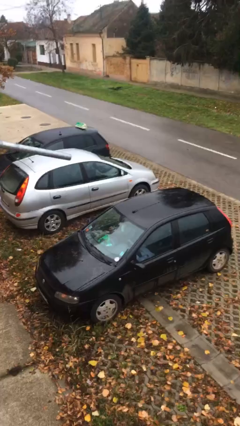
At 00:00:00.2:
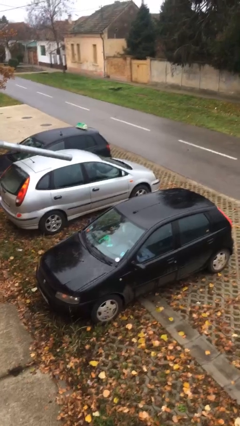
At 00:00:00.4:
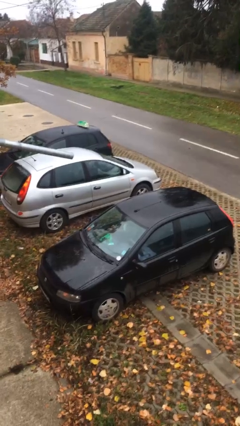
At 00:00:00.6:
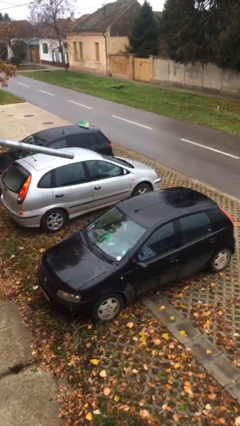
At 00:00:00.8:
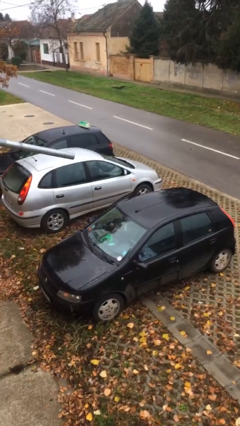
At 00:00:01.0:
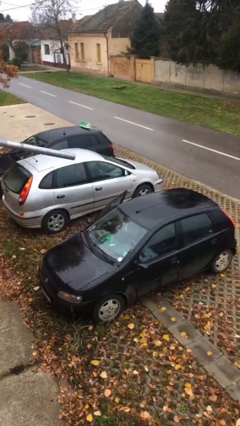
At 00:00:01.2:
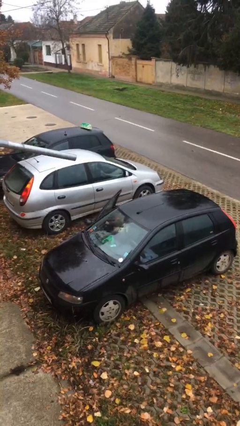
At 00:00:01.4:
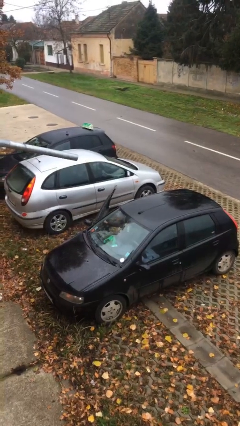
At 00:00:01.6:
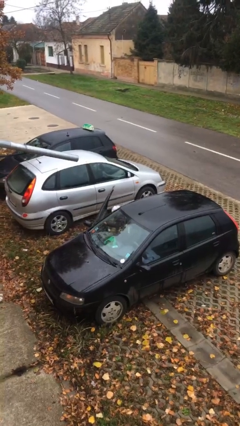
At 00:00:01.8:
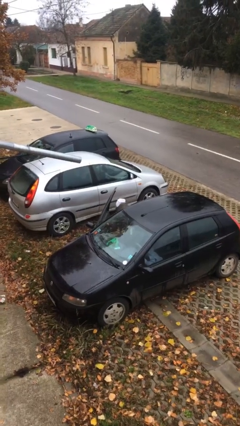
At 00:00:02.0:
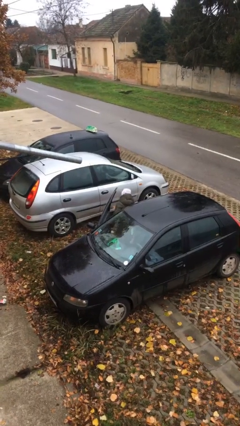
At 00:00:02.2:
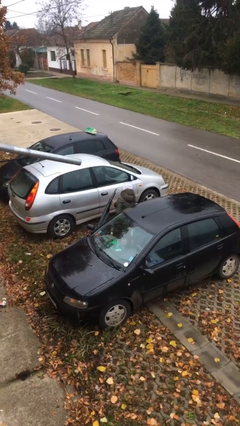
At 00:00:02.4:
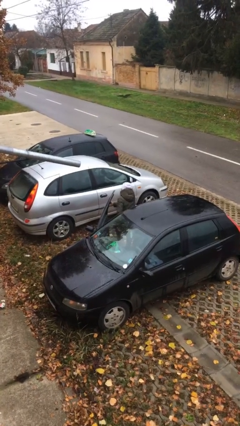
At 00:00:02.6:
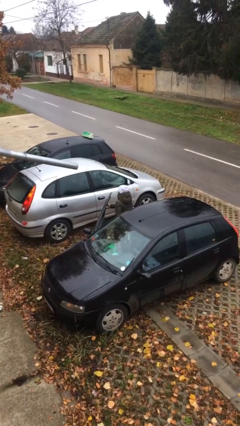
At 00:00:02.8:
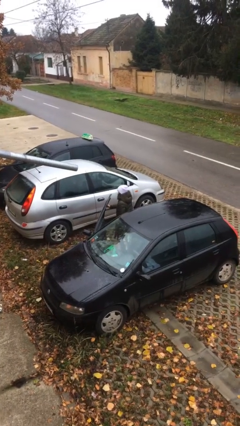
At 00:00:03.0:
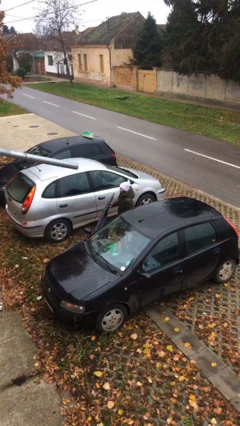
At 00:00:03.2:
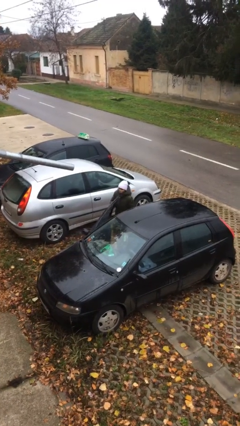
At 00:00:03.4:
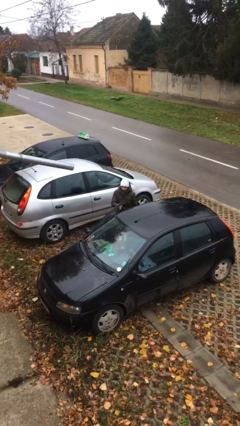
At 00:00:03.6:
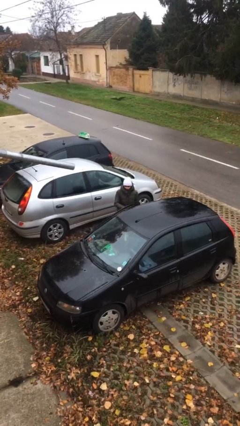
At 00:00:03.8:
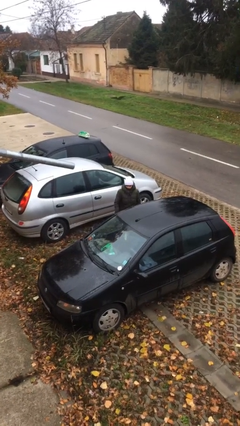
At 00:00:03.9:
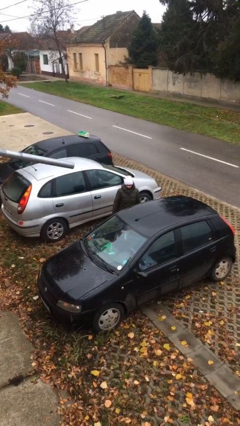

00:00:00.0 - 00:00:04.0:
person exits car

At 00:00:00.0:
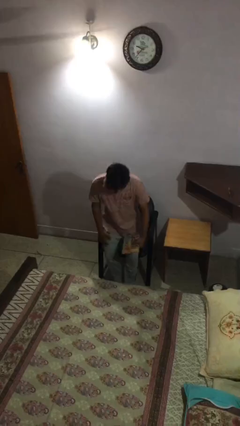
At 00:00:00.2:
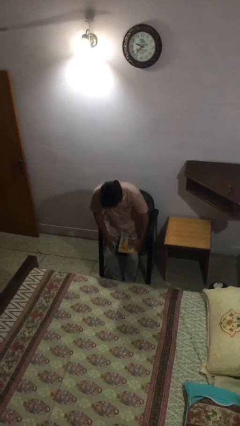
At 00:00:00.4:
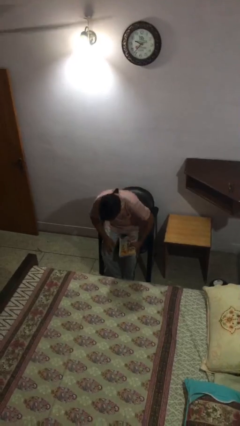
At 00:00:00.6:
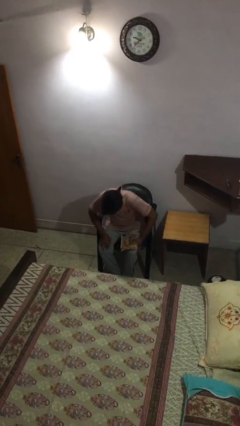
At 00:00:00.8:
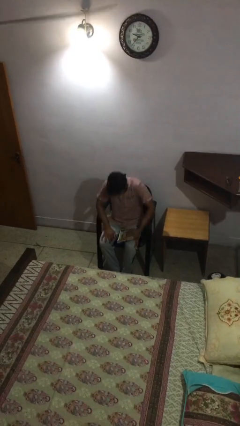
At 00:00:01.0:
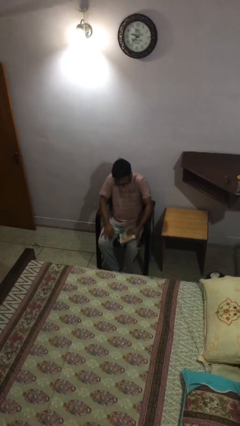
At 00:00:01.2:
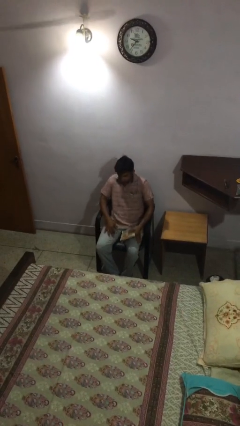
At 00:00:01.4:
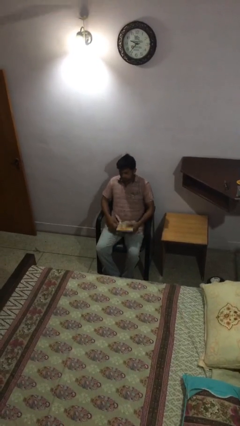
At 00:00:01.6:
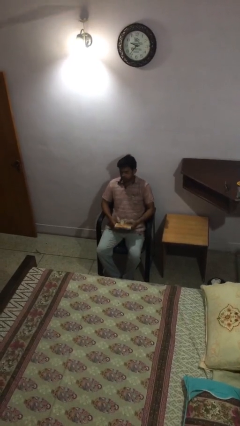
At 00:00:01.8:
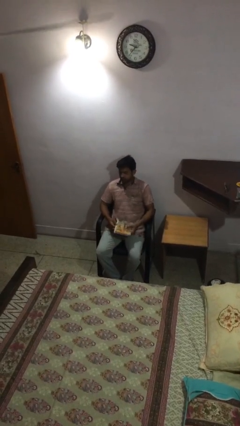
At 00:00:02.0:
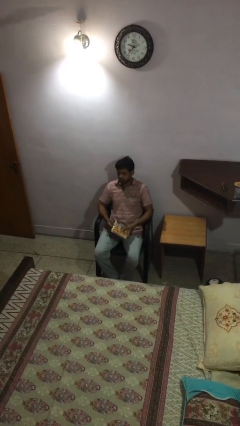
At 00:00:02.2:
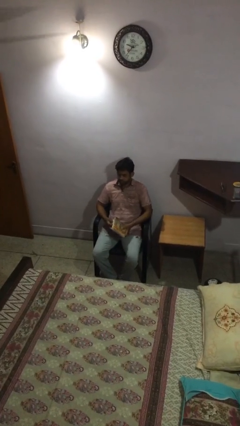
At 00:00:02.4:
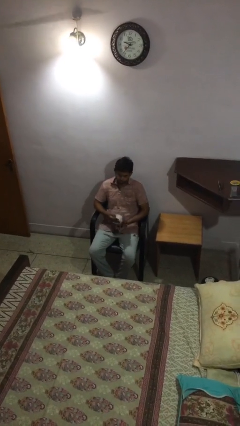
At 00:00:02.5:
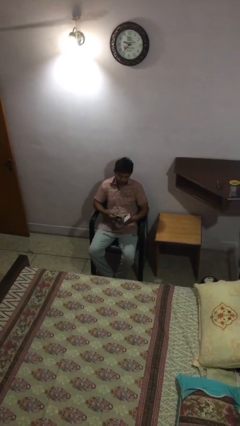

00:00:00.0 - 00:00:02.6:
person sits down

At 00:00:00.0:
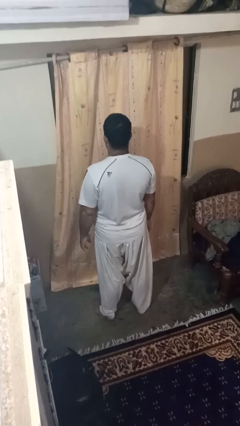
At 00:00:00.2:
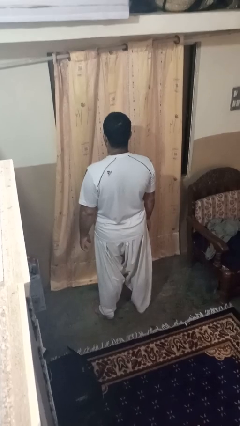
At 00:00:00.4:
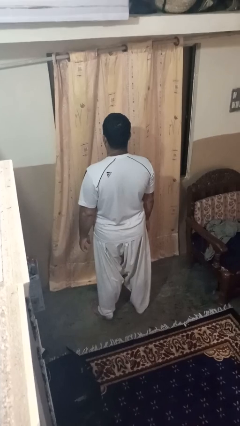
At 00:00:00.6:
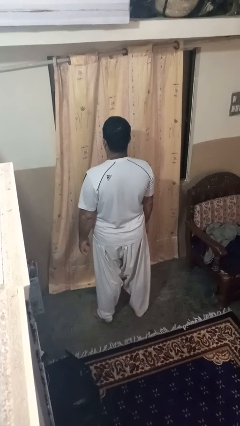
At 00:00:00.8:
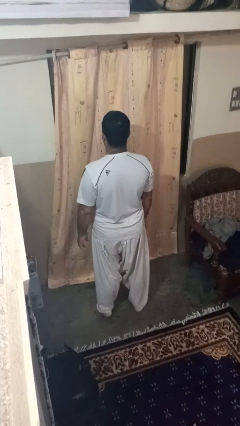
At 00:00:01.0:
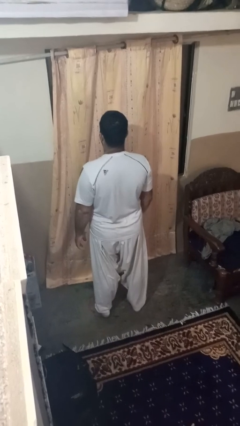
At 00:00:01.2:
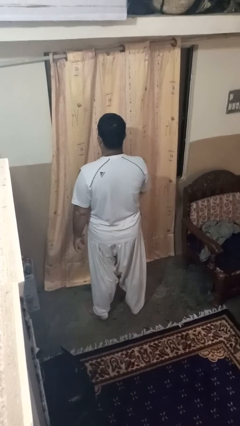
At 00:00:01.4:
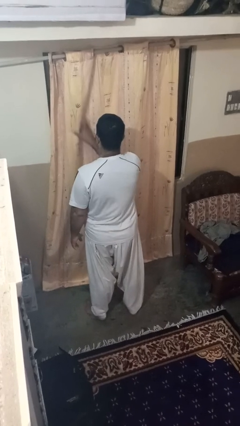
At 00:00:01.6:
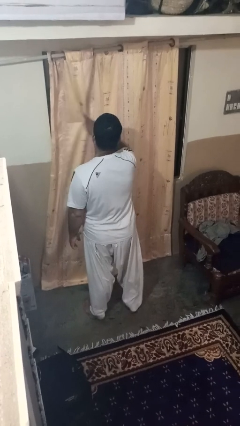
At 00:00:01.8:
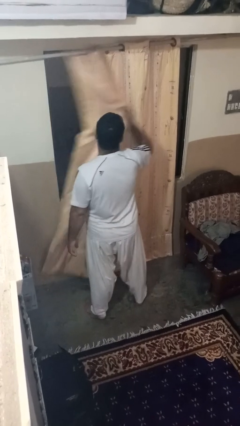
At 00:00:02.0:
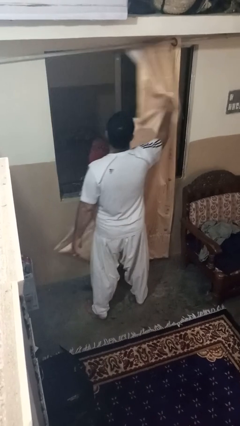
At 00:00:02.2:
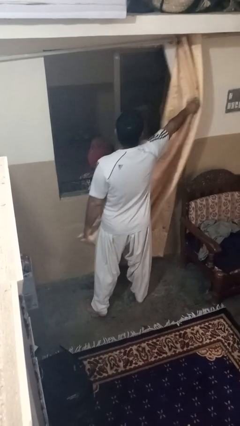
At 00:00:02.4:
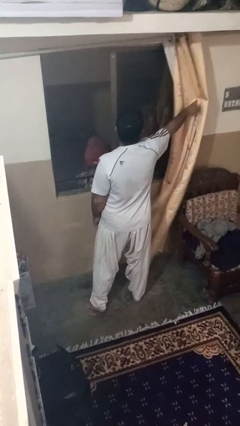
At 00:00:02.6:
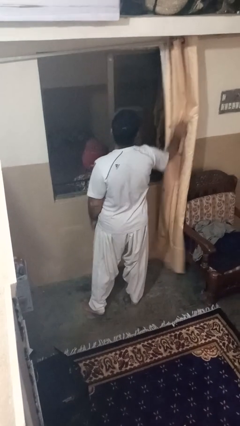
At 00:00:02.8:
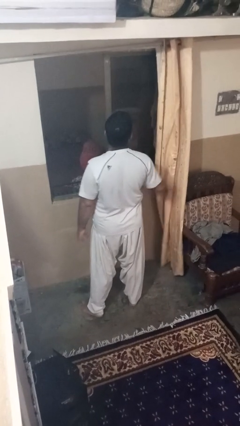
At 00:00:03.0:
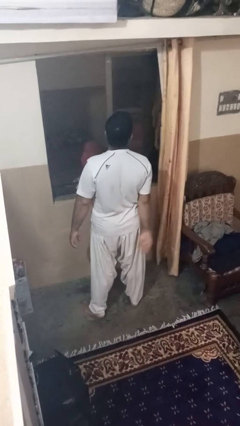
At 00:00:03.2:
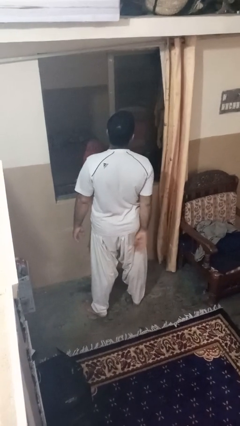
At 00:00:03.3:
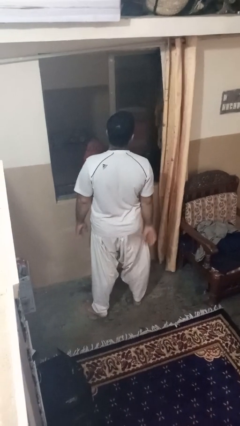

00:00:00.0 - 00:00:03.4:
person opens curtains

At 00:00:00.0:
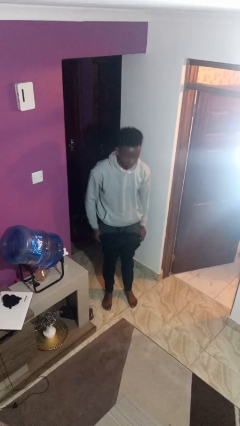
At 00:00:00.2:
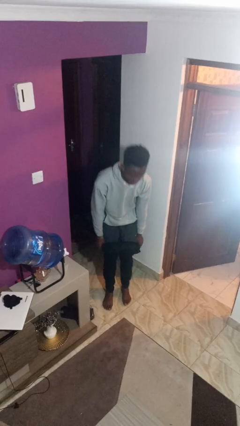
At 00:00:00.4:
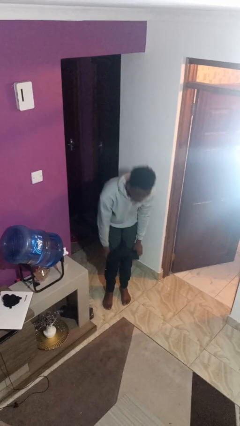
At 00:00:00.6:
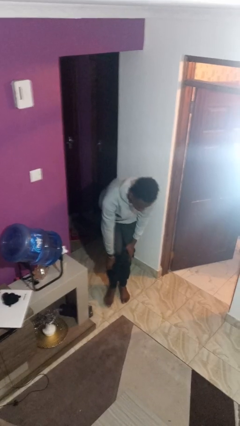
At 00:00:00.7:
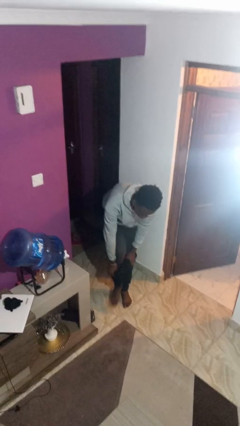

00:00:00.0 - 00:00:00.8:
person puts on pants

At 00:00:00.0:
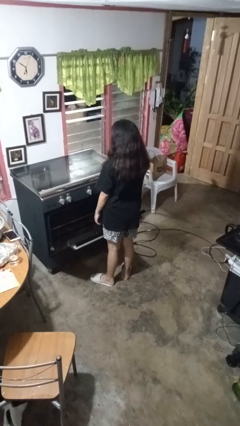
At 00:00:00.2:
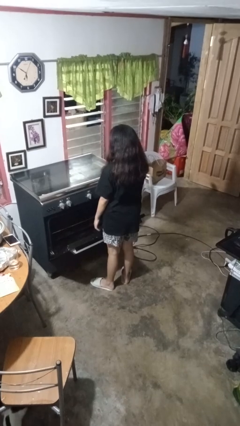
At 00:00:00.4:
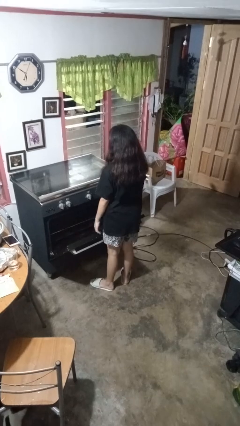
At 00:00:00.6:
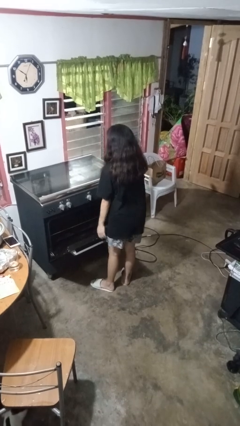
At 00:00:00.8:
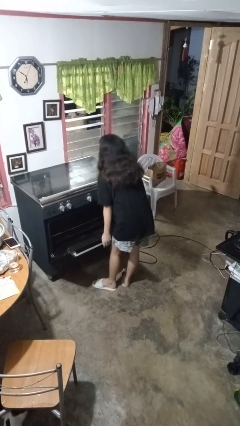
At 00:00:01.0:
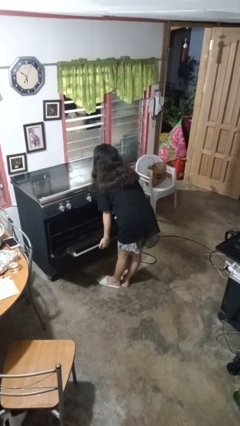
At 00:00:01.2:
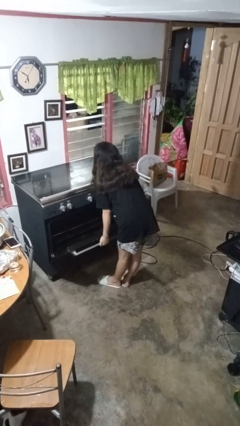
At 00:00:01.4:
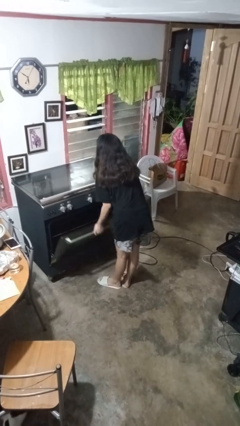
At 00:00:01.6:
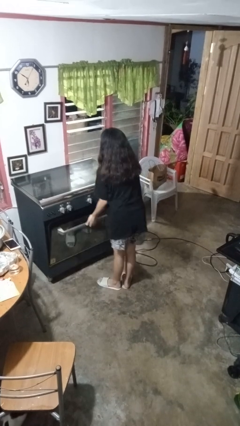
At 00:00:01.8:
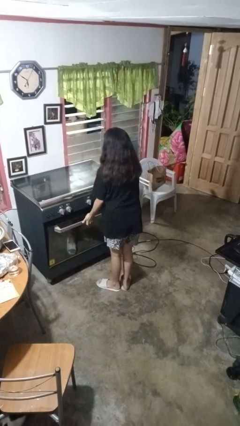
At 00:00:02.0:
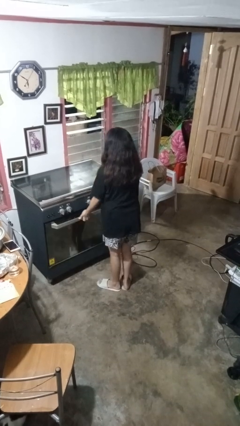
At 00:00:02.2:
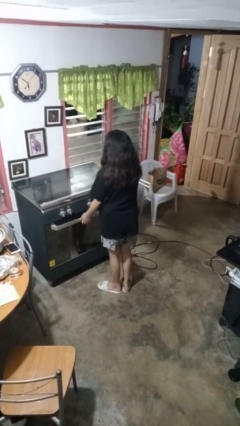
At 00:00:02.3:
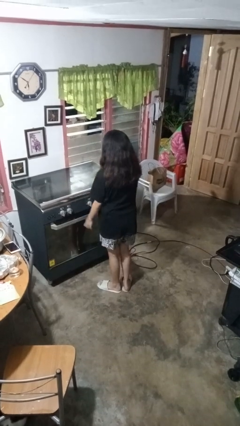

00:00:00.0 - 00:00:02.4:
person closes oven door

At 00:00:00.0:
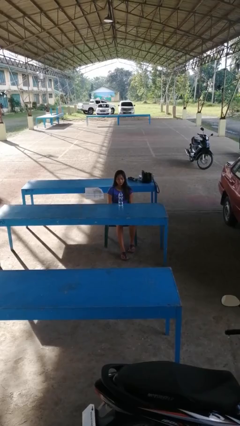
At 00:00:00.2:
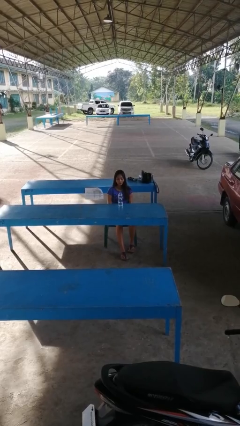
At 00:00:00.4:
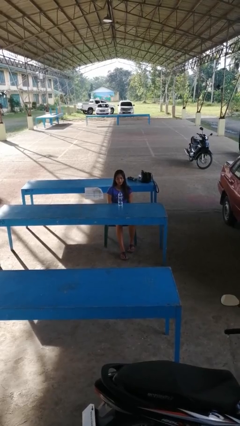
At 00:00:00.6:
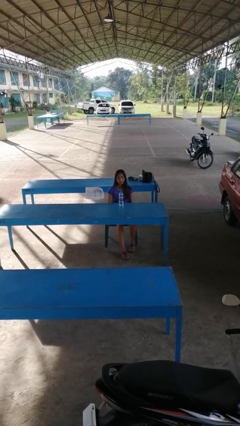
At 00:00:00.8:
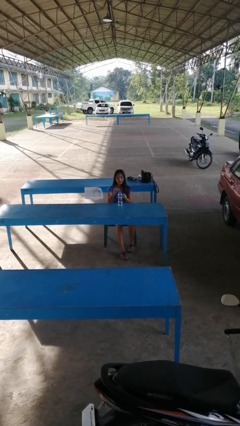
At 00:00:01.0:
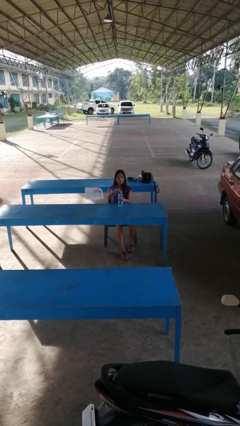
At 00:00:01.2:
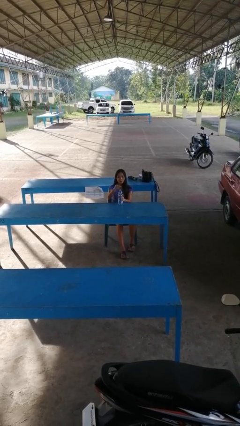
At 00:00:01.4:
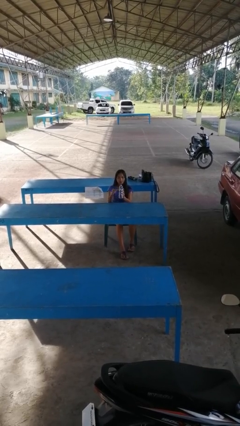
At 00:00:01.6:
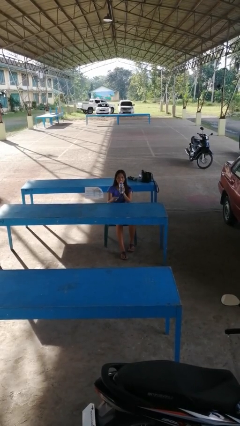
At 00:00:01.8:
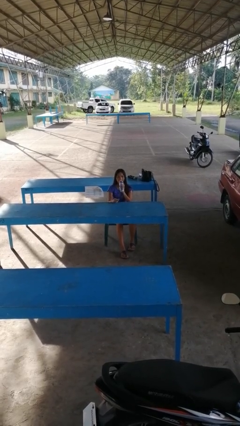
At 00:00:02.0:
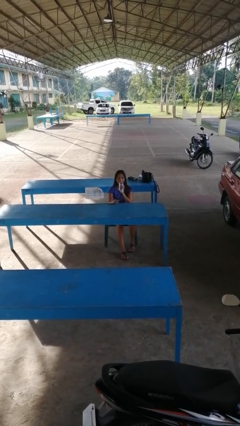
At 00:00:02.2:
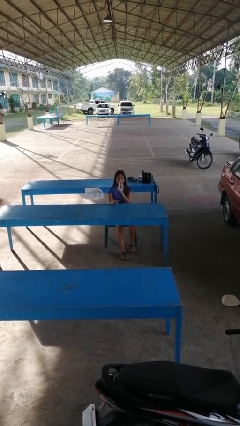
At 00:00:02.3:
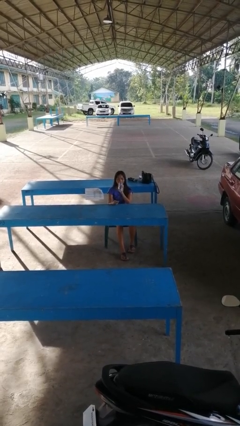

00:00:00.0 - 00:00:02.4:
person drinks from bottle

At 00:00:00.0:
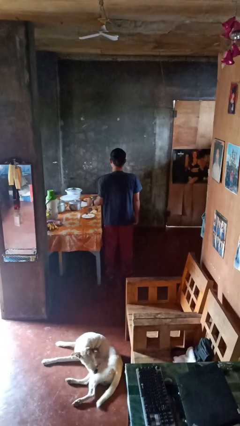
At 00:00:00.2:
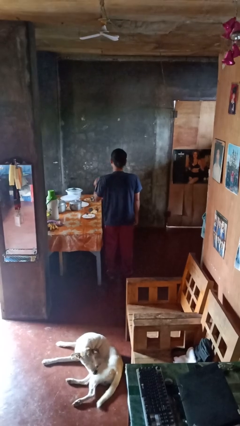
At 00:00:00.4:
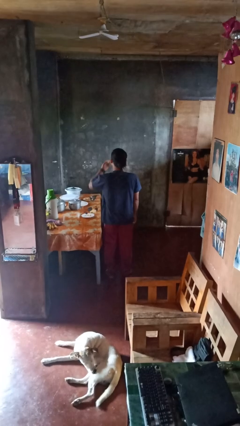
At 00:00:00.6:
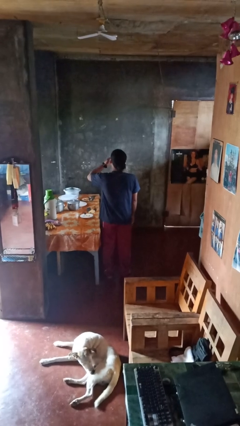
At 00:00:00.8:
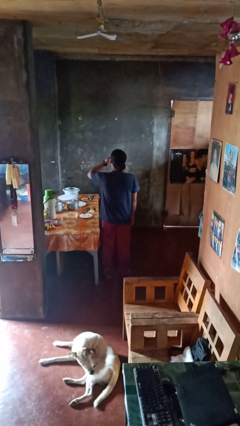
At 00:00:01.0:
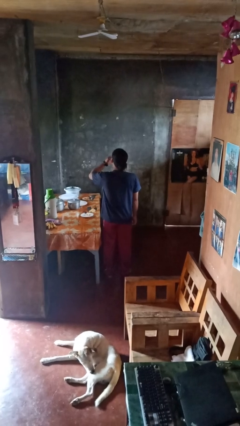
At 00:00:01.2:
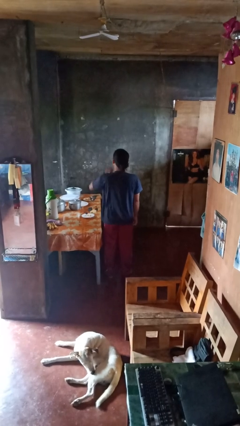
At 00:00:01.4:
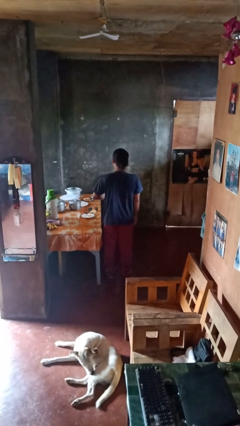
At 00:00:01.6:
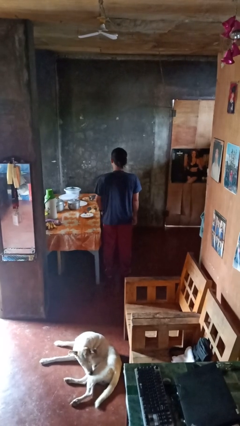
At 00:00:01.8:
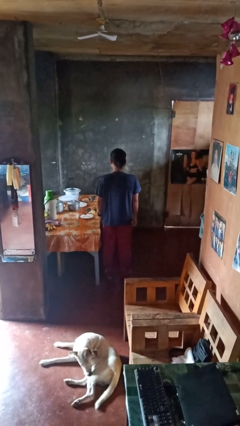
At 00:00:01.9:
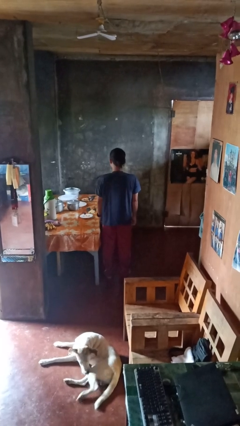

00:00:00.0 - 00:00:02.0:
person eats with hands
